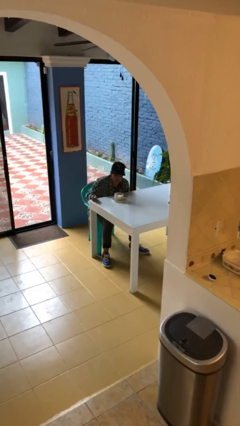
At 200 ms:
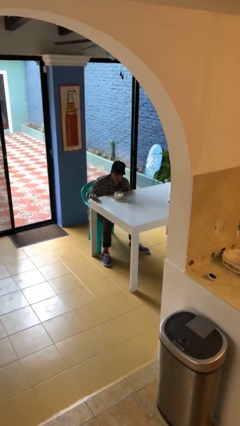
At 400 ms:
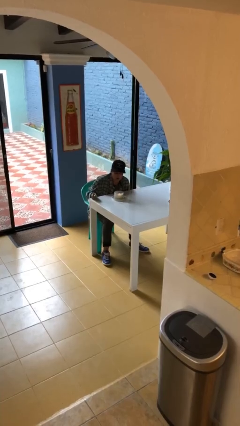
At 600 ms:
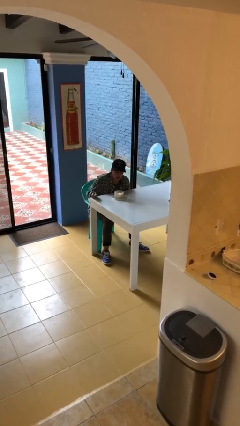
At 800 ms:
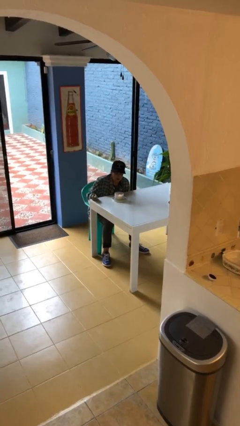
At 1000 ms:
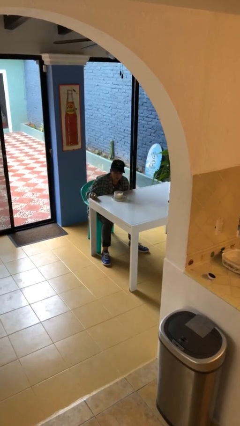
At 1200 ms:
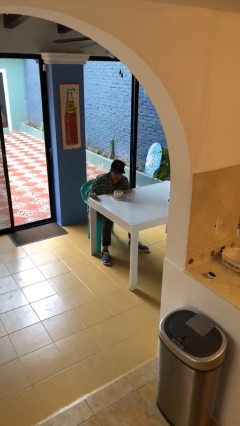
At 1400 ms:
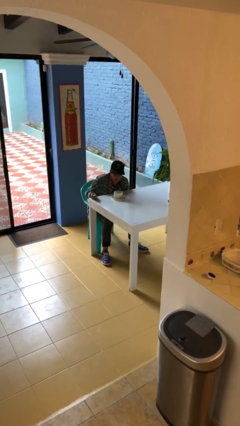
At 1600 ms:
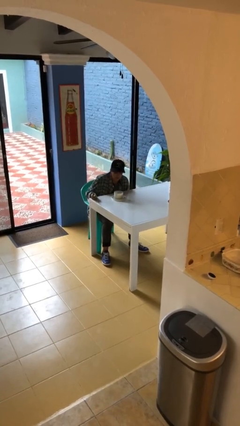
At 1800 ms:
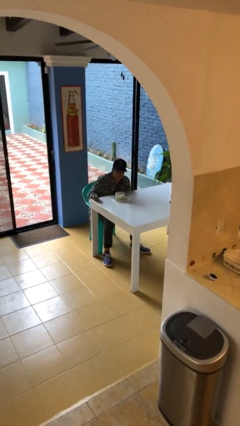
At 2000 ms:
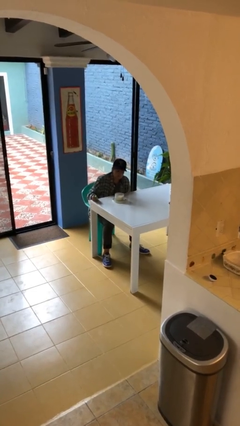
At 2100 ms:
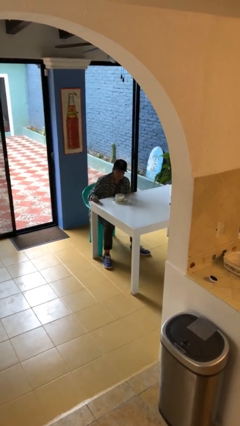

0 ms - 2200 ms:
person extinguishes candle

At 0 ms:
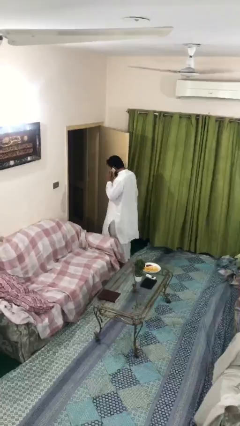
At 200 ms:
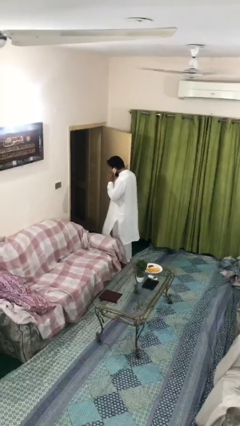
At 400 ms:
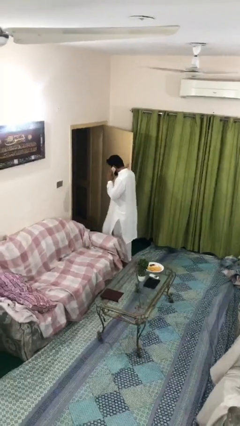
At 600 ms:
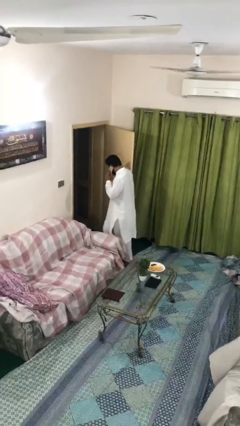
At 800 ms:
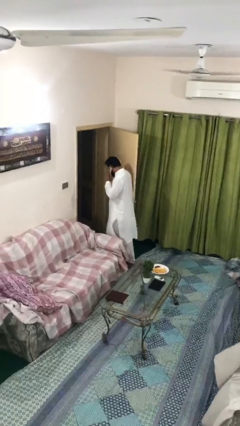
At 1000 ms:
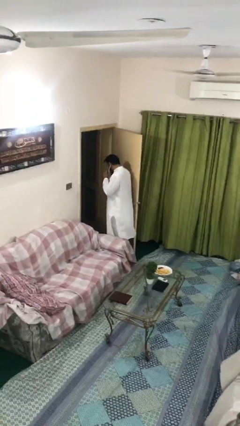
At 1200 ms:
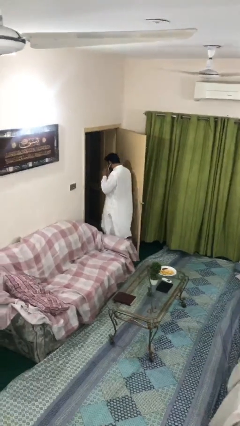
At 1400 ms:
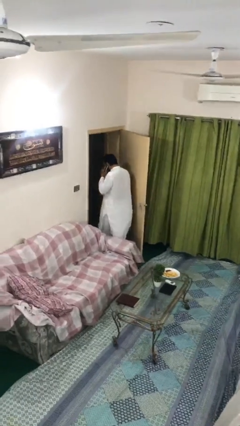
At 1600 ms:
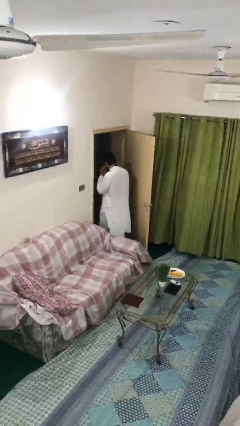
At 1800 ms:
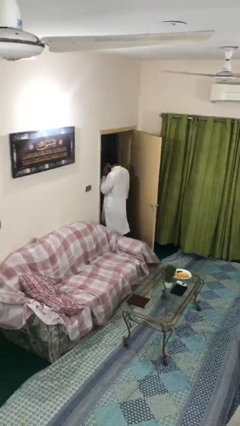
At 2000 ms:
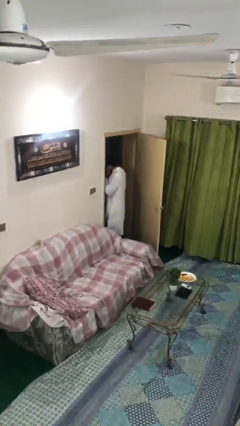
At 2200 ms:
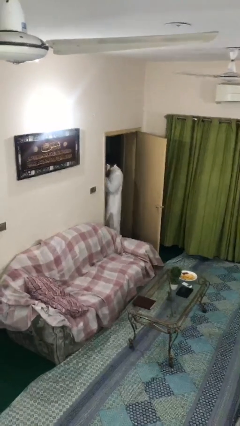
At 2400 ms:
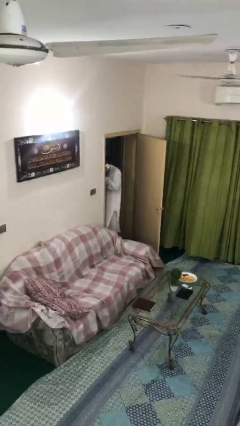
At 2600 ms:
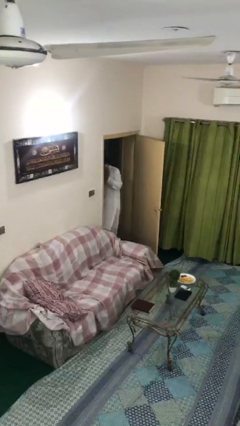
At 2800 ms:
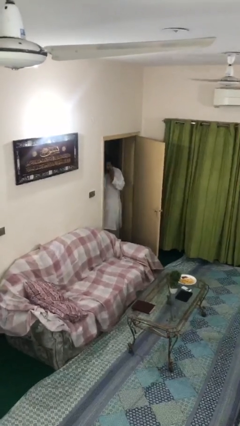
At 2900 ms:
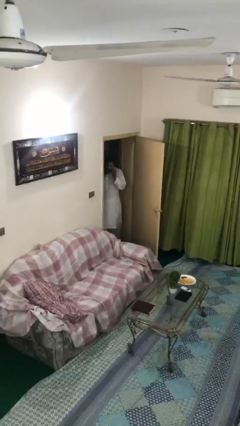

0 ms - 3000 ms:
person exits scene through structure

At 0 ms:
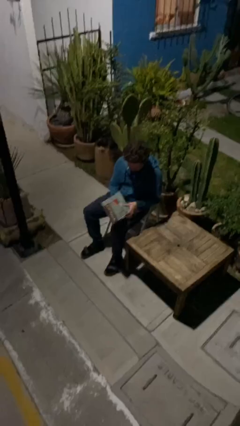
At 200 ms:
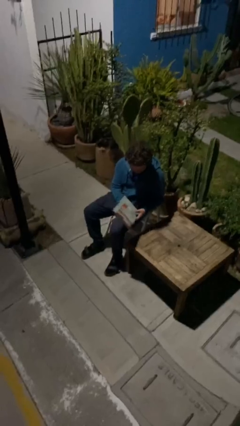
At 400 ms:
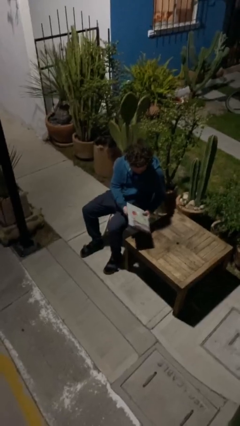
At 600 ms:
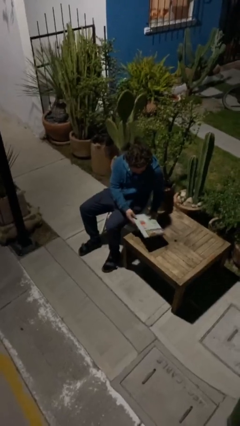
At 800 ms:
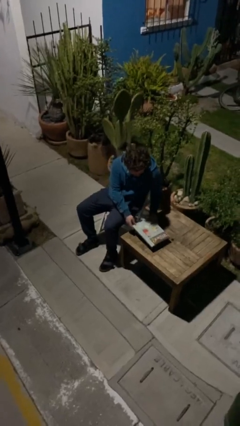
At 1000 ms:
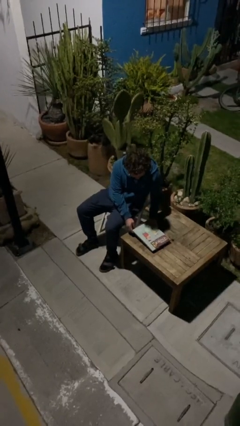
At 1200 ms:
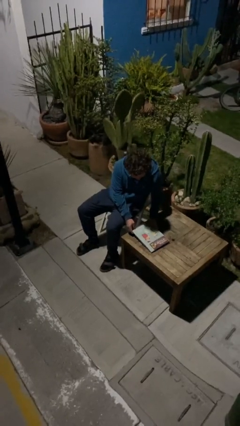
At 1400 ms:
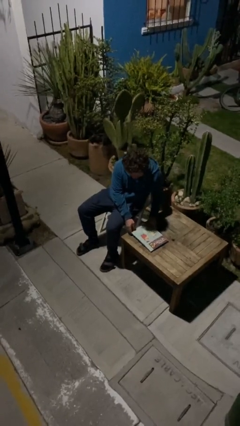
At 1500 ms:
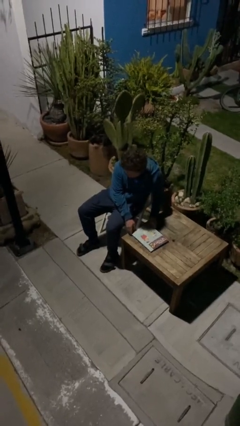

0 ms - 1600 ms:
person puts down object on table

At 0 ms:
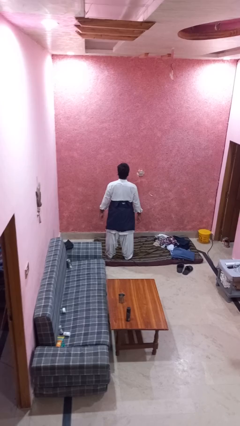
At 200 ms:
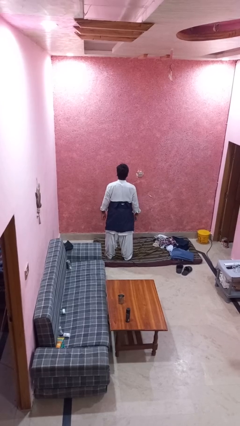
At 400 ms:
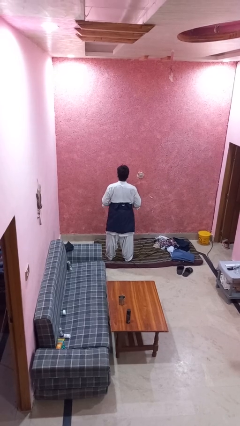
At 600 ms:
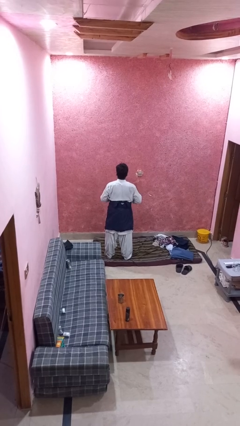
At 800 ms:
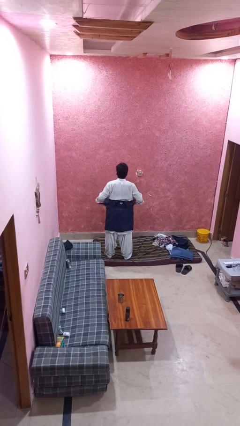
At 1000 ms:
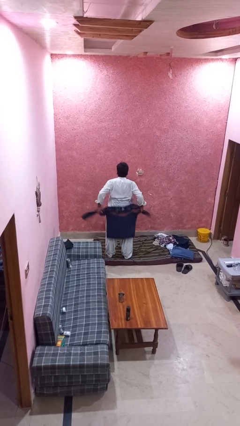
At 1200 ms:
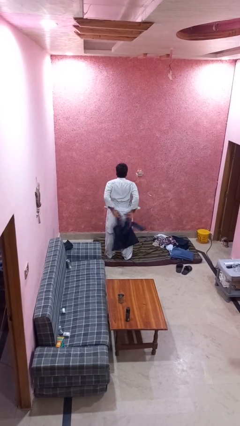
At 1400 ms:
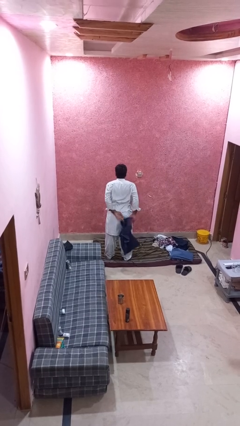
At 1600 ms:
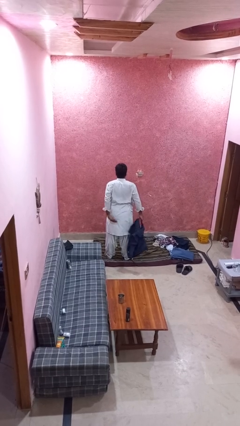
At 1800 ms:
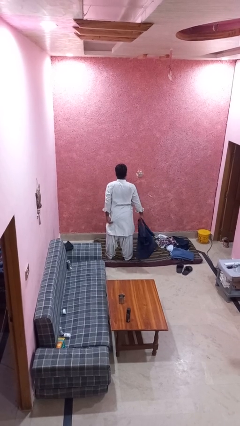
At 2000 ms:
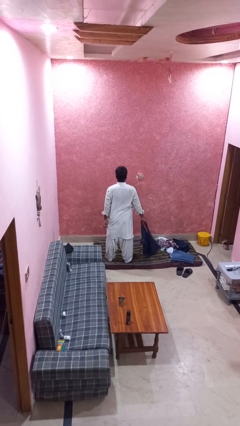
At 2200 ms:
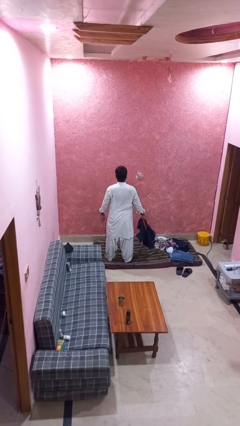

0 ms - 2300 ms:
person unties jacket around waist

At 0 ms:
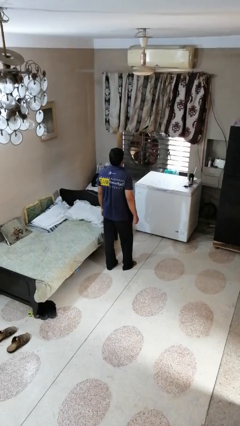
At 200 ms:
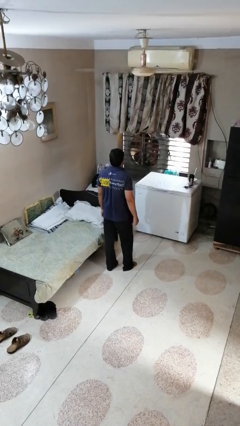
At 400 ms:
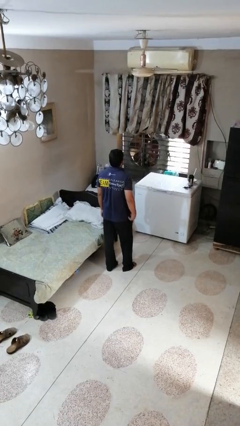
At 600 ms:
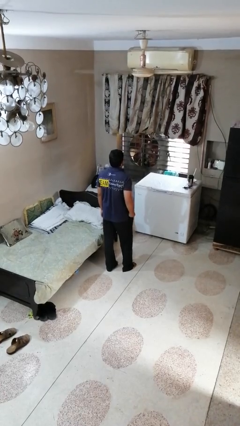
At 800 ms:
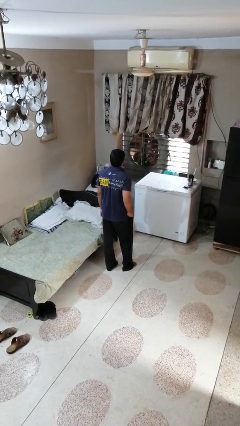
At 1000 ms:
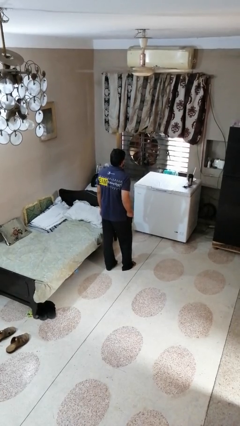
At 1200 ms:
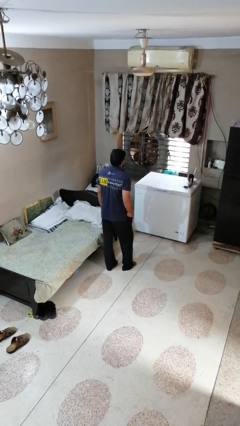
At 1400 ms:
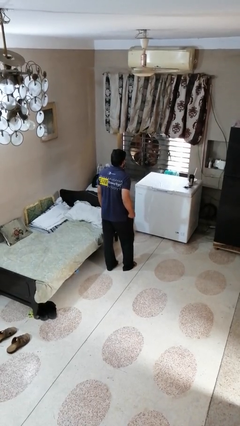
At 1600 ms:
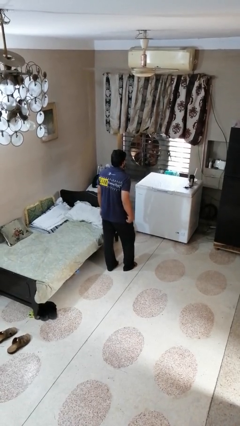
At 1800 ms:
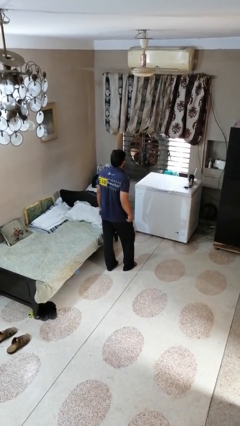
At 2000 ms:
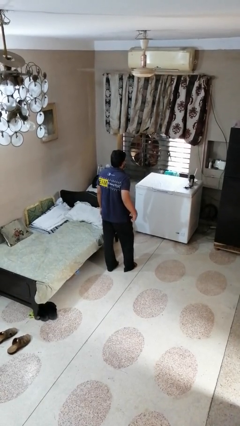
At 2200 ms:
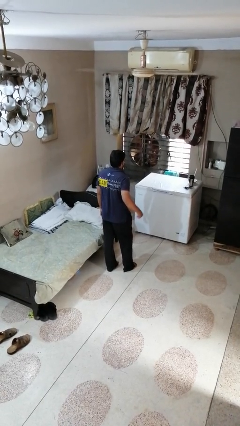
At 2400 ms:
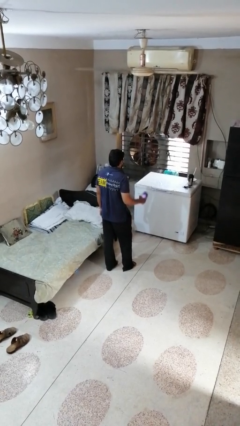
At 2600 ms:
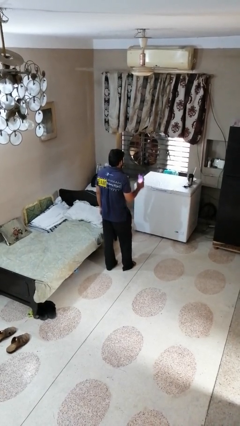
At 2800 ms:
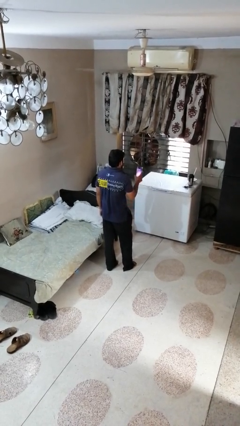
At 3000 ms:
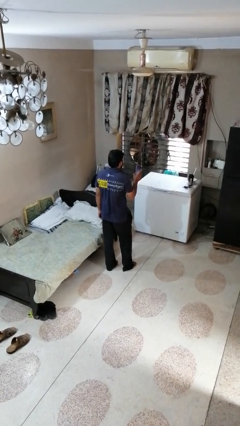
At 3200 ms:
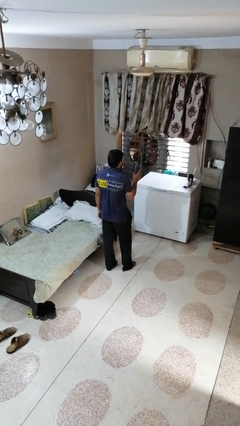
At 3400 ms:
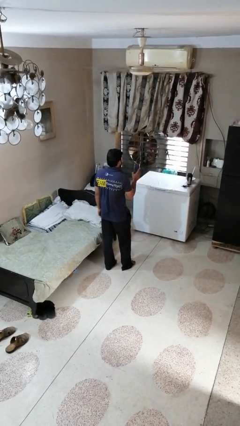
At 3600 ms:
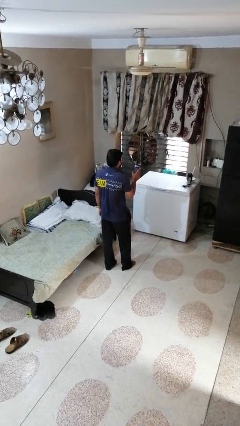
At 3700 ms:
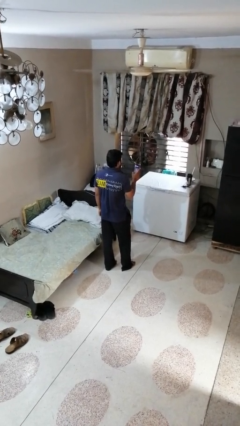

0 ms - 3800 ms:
person takes phone from pocket

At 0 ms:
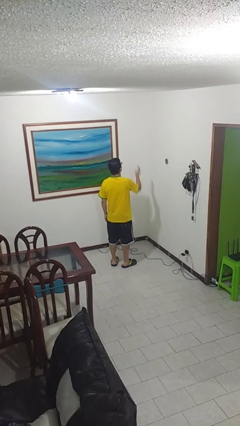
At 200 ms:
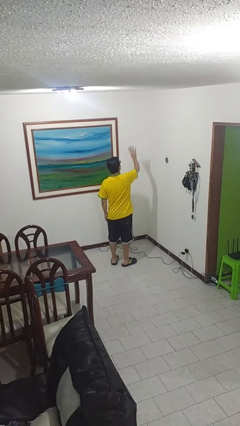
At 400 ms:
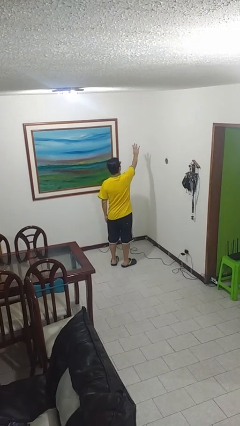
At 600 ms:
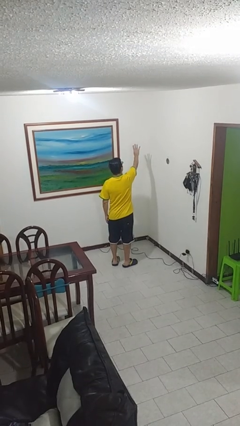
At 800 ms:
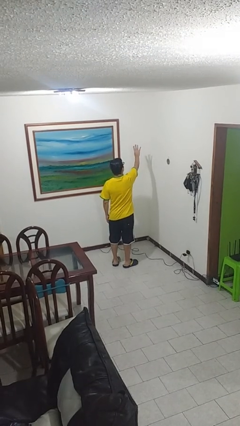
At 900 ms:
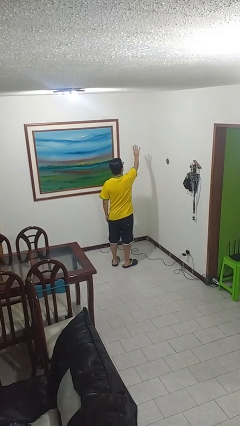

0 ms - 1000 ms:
person gestures number four

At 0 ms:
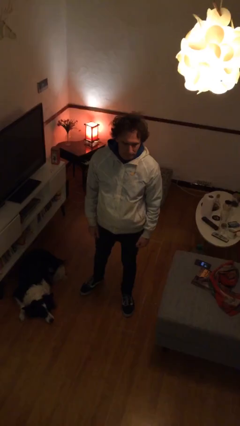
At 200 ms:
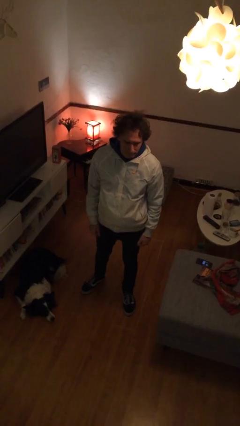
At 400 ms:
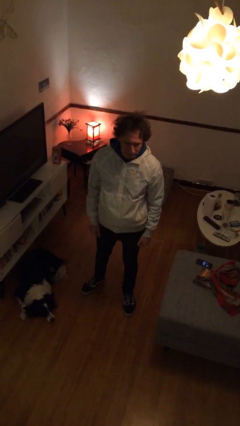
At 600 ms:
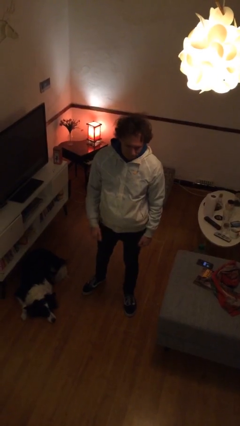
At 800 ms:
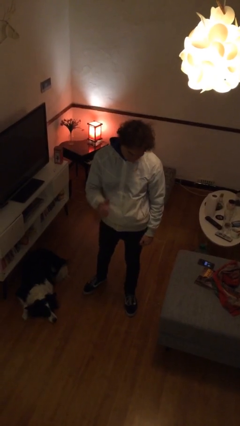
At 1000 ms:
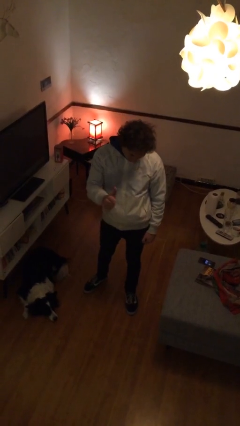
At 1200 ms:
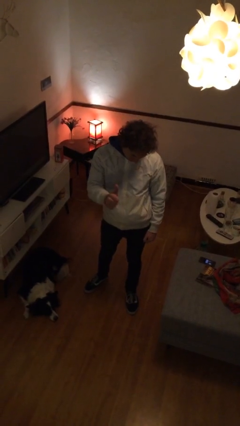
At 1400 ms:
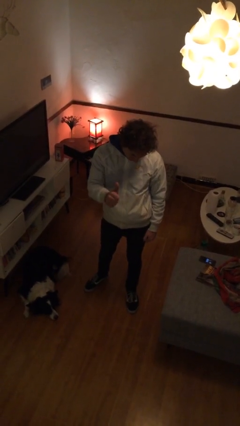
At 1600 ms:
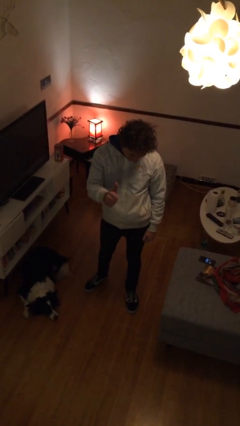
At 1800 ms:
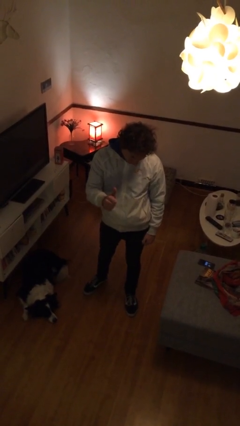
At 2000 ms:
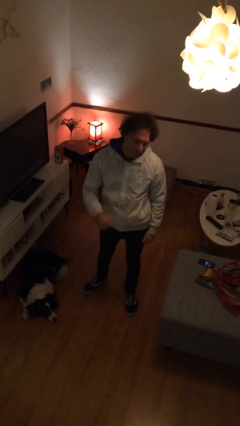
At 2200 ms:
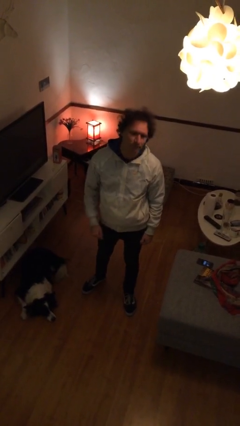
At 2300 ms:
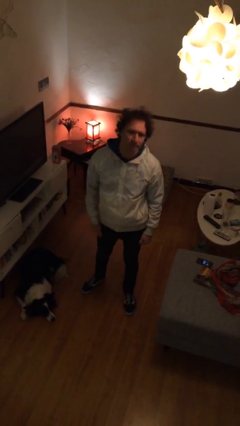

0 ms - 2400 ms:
person gestures thumbs up

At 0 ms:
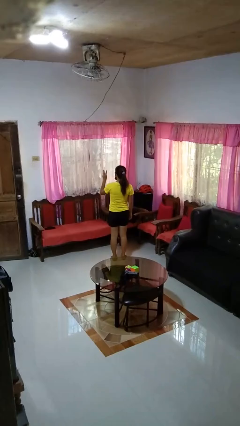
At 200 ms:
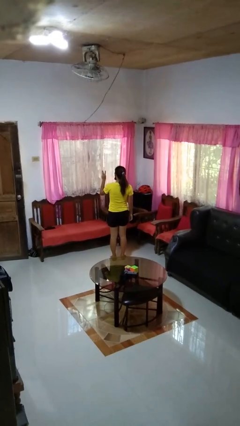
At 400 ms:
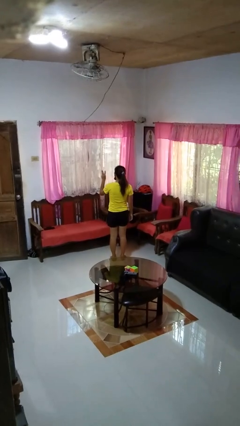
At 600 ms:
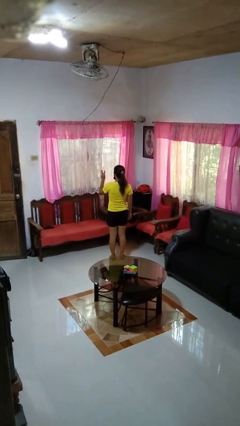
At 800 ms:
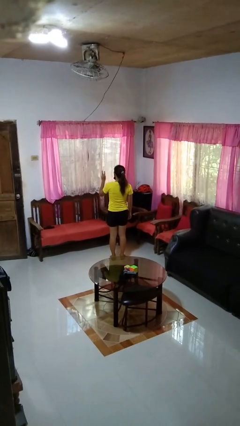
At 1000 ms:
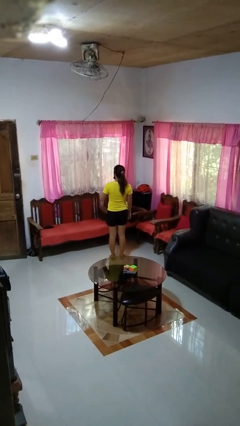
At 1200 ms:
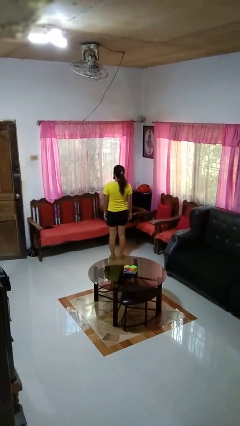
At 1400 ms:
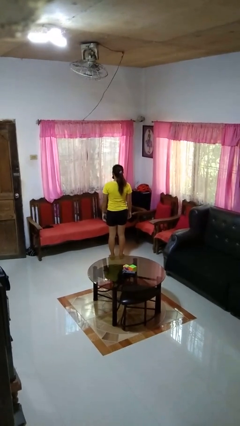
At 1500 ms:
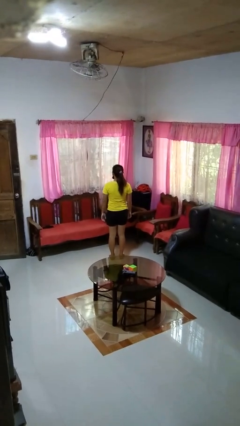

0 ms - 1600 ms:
person gestures number three
